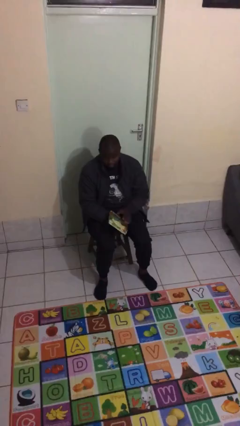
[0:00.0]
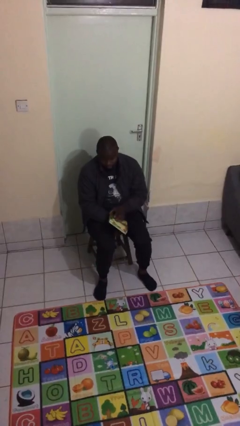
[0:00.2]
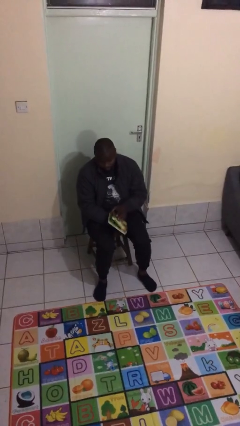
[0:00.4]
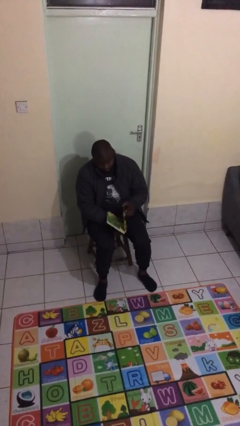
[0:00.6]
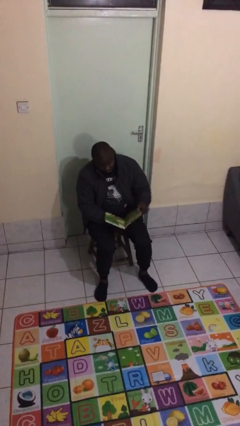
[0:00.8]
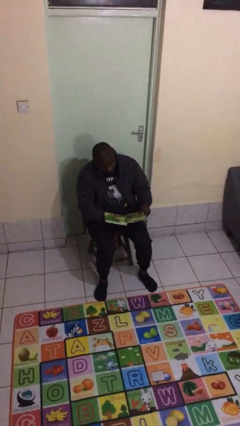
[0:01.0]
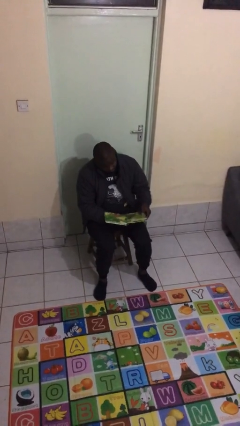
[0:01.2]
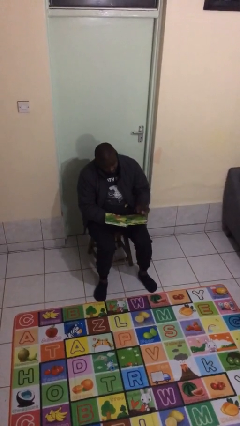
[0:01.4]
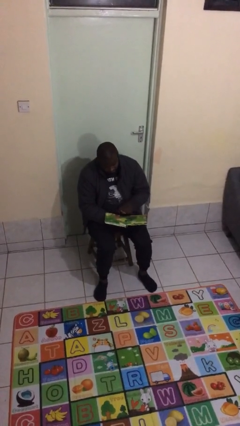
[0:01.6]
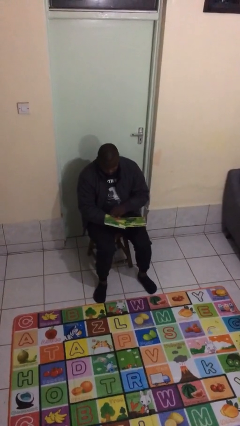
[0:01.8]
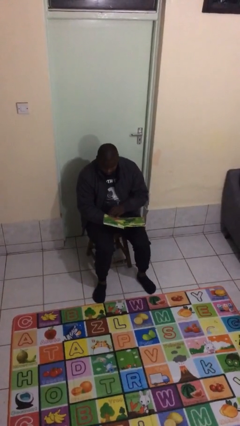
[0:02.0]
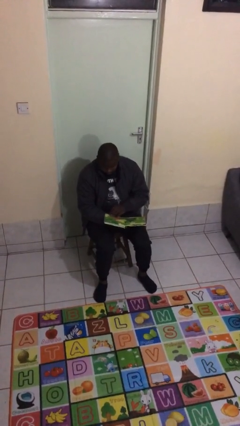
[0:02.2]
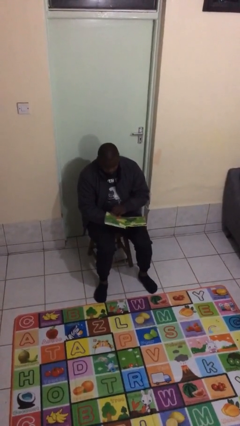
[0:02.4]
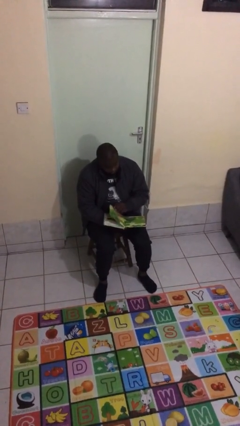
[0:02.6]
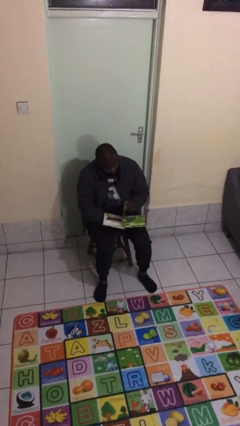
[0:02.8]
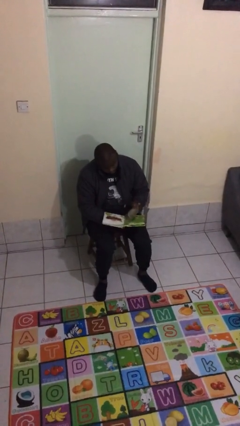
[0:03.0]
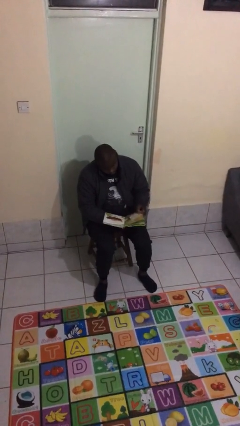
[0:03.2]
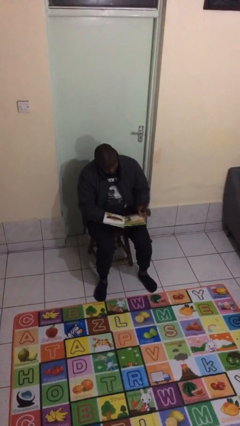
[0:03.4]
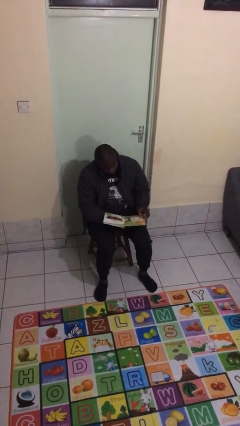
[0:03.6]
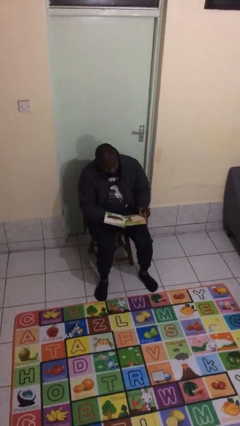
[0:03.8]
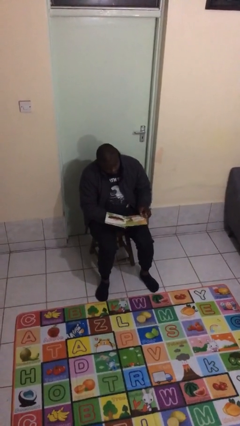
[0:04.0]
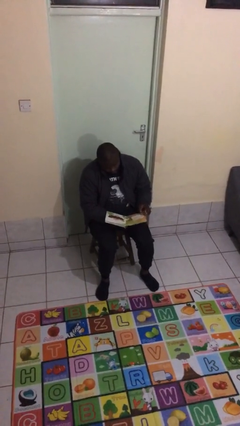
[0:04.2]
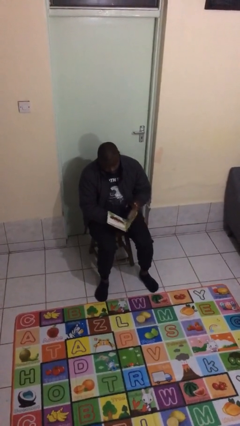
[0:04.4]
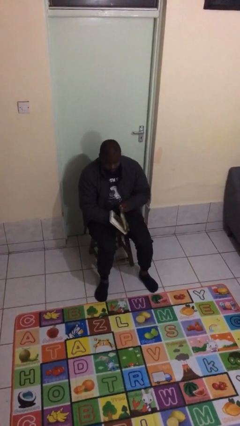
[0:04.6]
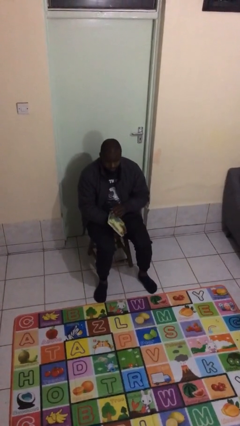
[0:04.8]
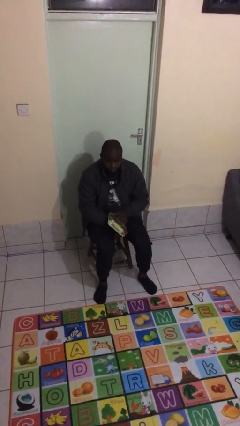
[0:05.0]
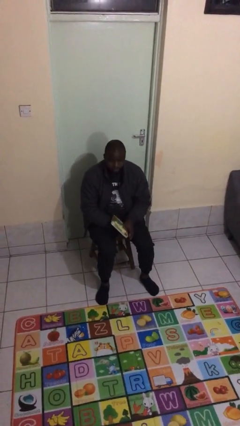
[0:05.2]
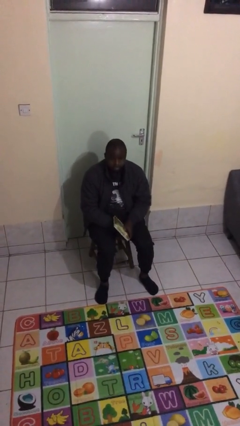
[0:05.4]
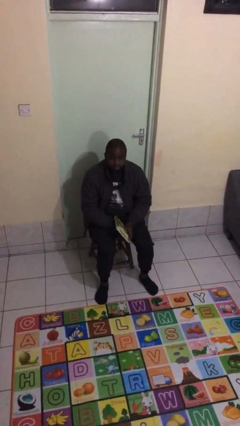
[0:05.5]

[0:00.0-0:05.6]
person reads book

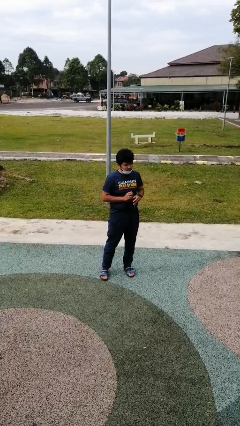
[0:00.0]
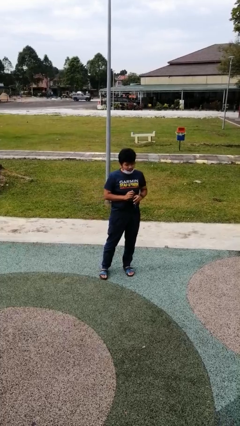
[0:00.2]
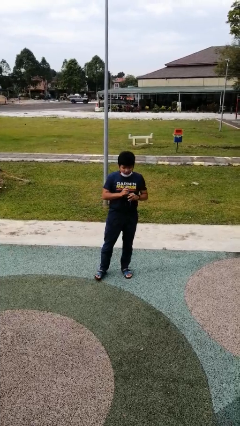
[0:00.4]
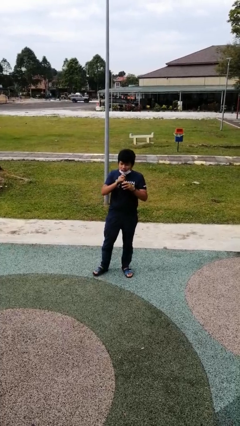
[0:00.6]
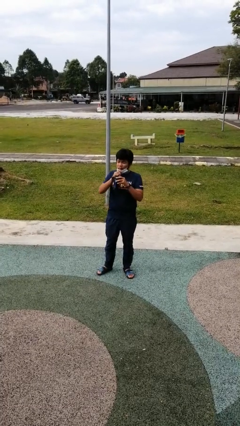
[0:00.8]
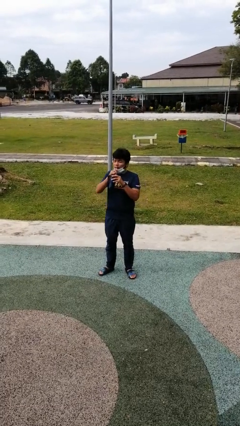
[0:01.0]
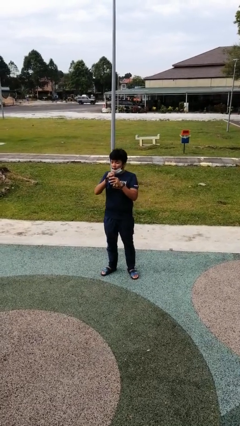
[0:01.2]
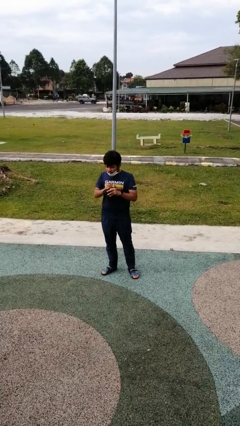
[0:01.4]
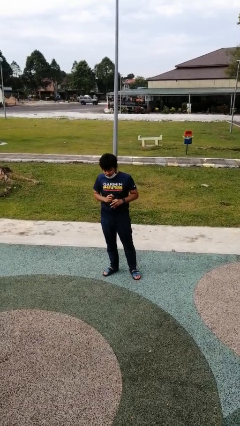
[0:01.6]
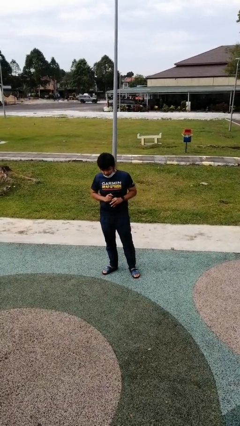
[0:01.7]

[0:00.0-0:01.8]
person drinks from straw

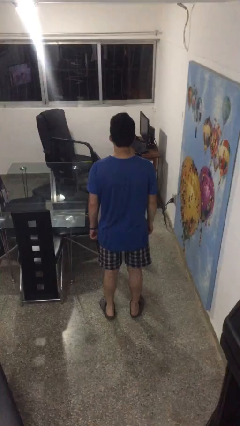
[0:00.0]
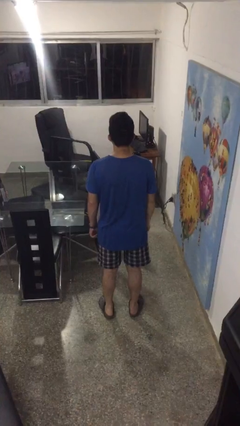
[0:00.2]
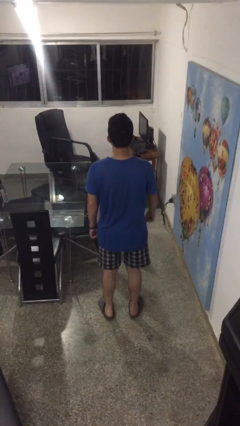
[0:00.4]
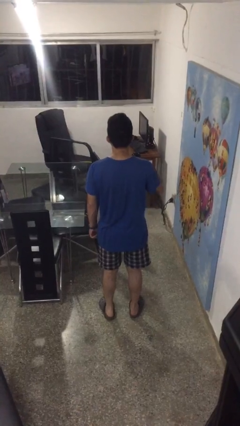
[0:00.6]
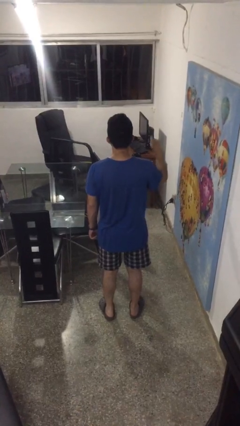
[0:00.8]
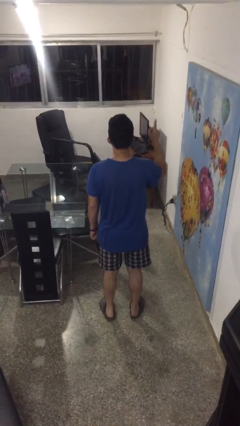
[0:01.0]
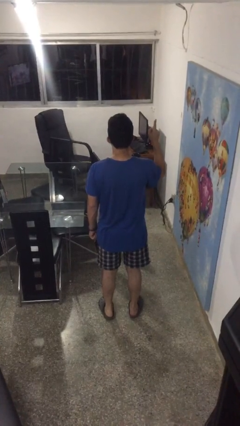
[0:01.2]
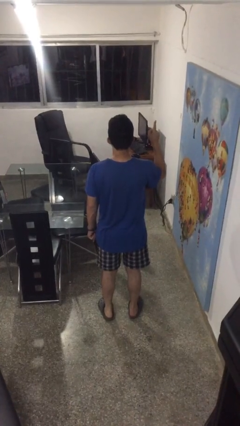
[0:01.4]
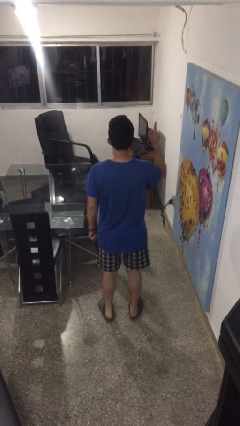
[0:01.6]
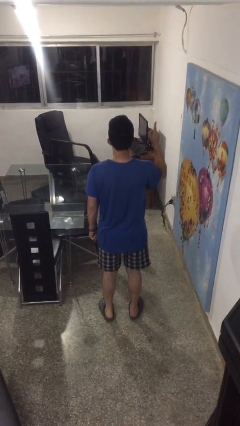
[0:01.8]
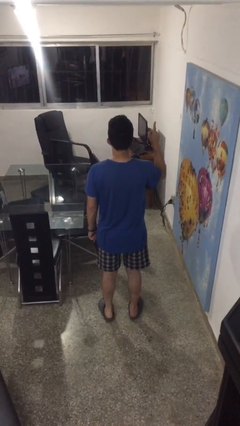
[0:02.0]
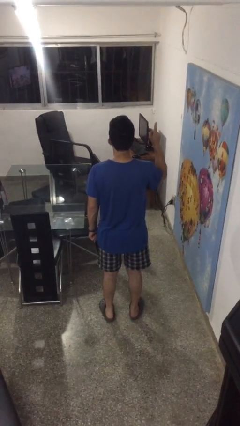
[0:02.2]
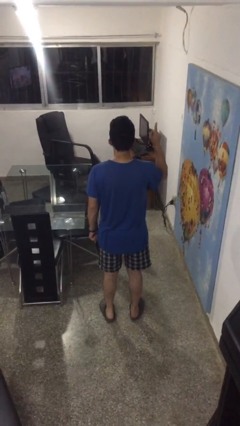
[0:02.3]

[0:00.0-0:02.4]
person gestures number one

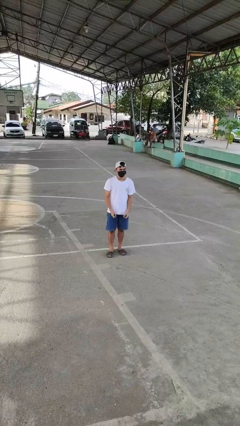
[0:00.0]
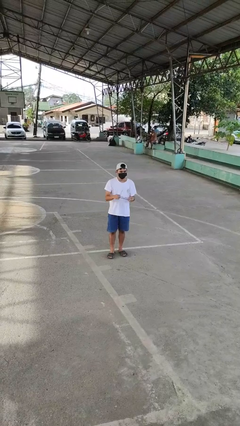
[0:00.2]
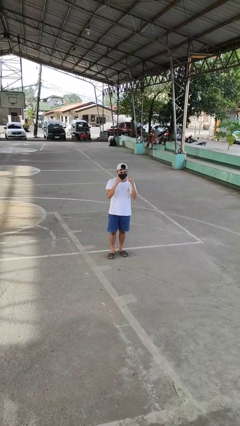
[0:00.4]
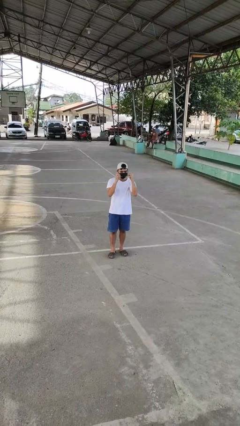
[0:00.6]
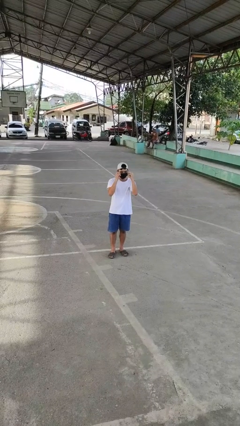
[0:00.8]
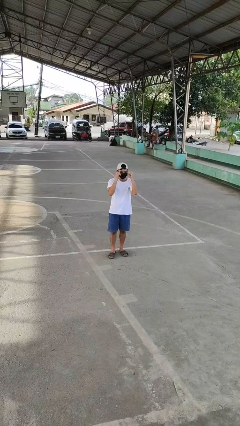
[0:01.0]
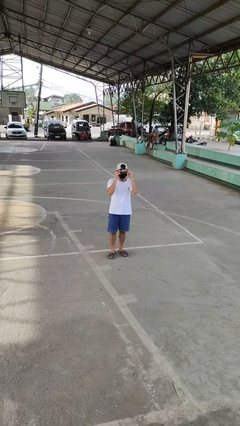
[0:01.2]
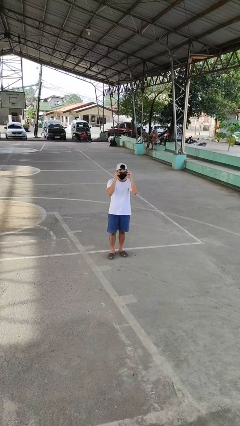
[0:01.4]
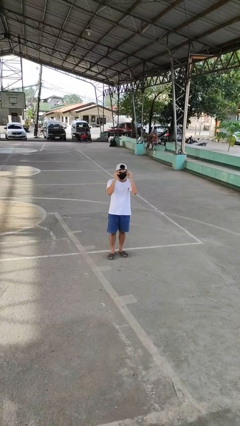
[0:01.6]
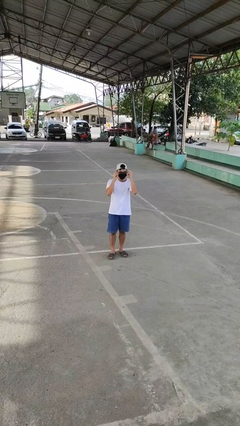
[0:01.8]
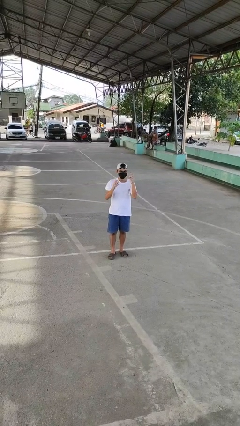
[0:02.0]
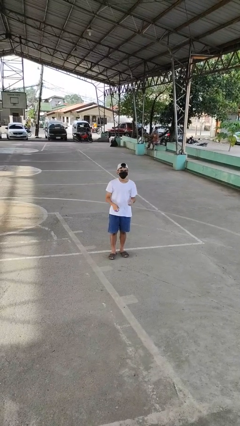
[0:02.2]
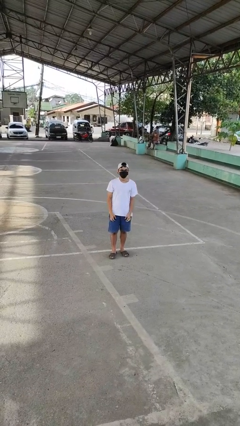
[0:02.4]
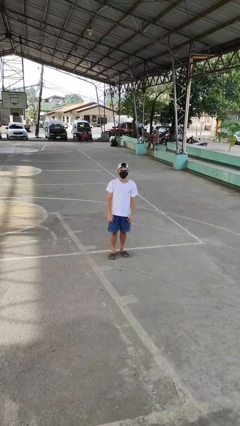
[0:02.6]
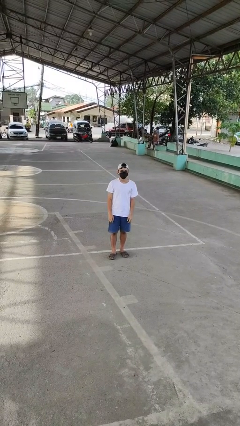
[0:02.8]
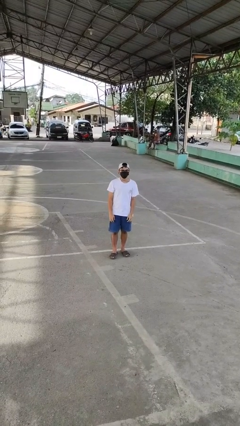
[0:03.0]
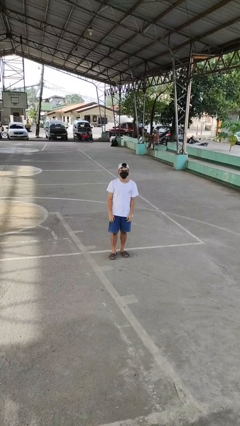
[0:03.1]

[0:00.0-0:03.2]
person puts on glasses

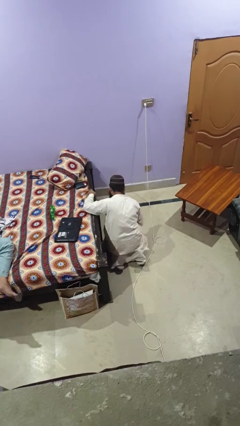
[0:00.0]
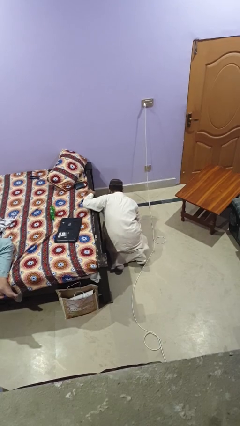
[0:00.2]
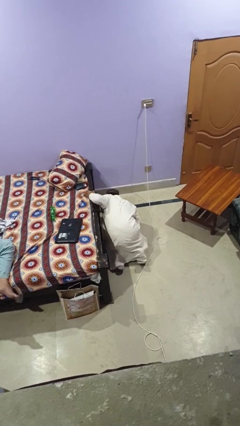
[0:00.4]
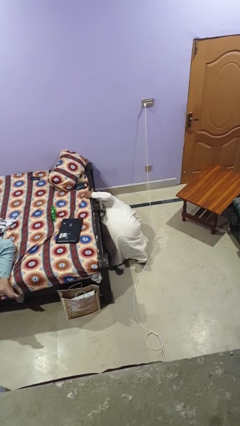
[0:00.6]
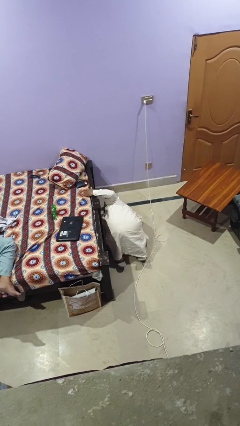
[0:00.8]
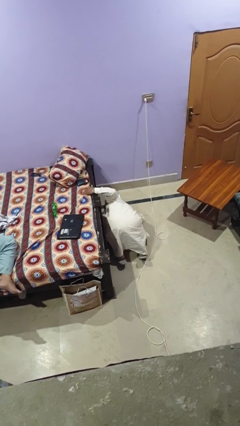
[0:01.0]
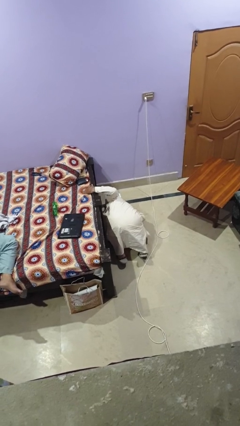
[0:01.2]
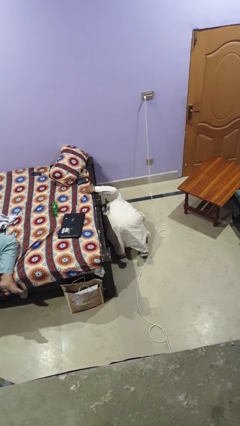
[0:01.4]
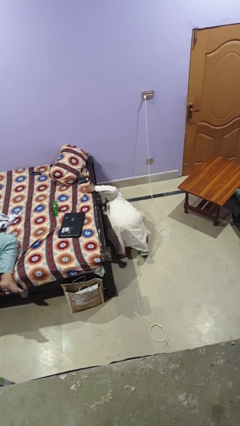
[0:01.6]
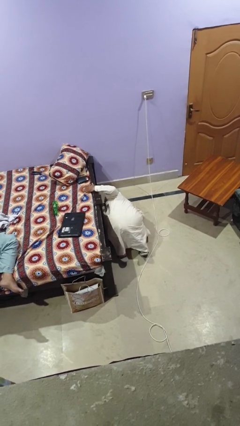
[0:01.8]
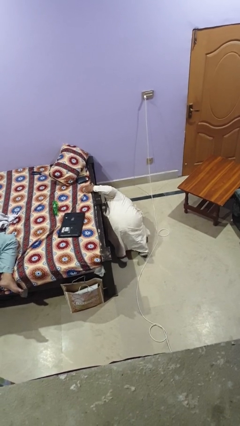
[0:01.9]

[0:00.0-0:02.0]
person searches under bed

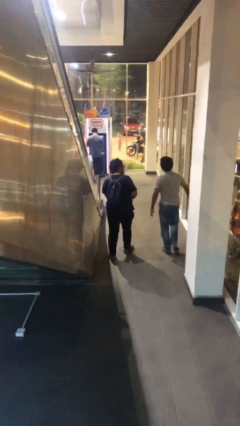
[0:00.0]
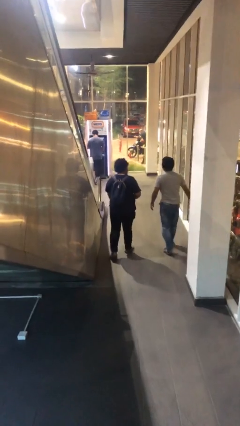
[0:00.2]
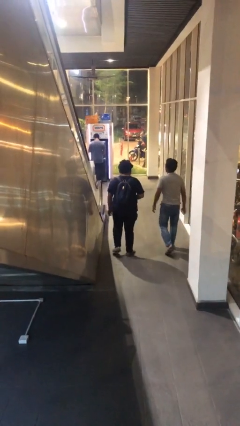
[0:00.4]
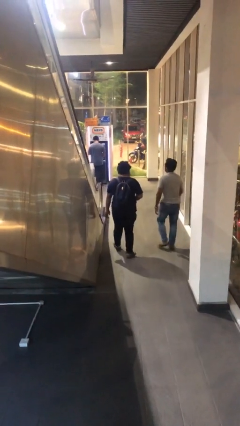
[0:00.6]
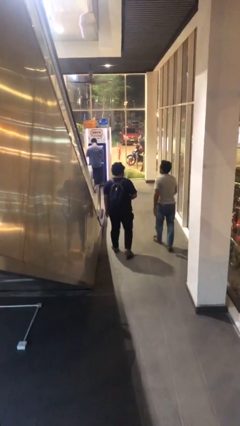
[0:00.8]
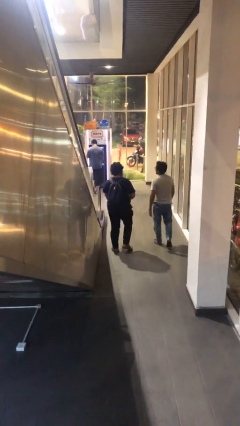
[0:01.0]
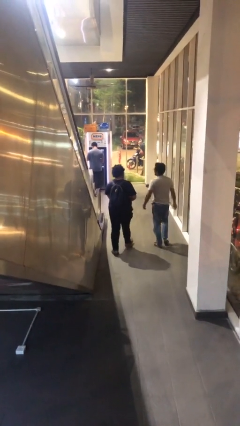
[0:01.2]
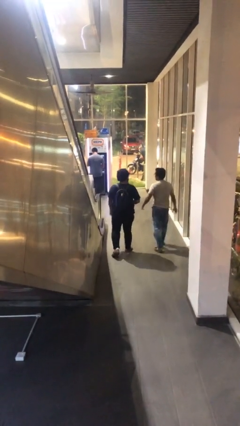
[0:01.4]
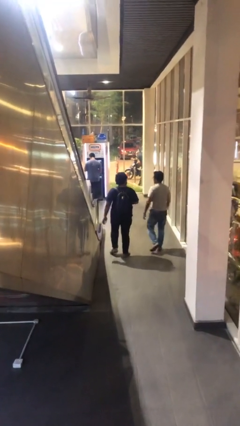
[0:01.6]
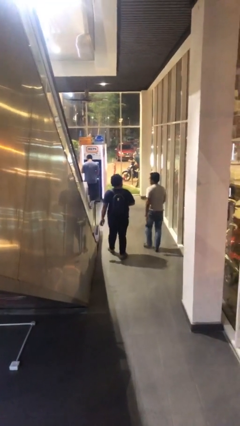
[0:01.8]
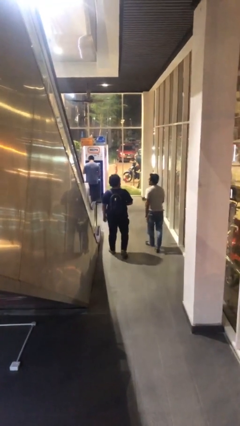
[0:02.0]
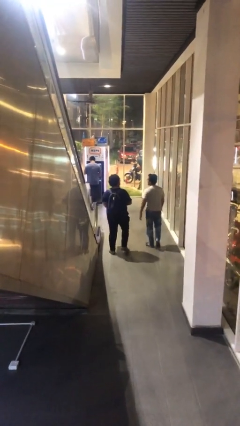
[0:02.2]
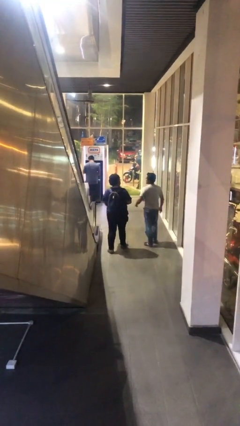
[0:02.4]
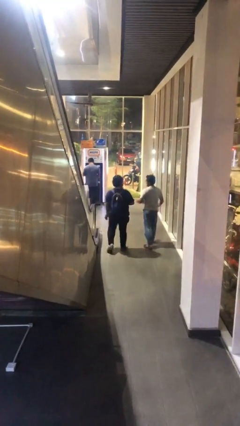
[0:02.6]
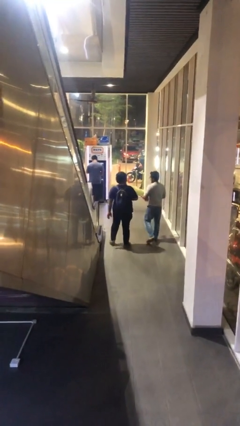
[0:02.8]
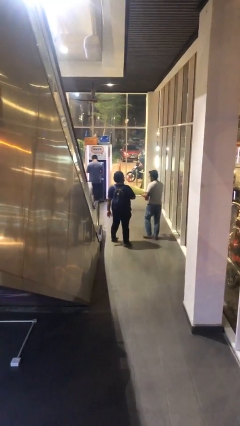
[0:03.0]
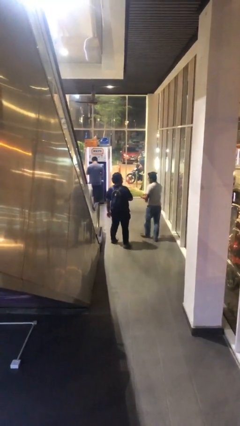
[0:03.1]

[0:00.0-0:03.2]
person talks to person
